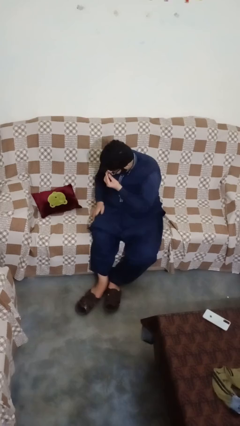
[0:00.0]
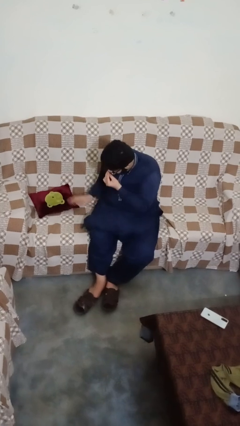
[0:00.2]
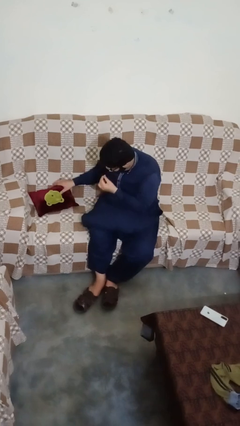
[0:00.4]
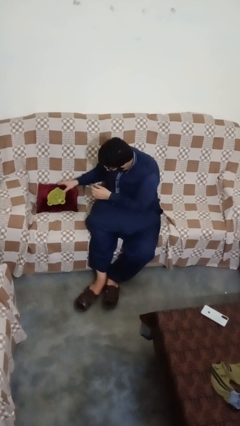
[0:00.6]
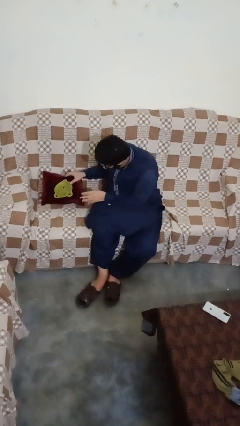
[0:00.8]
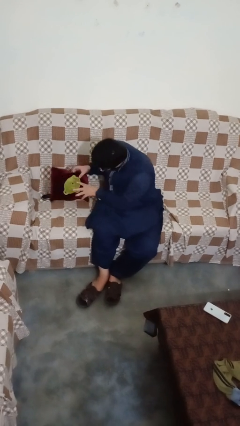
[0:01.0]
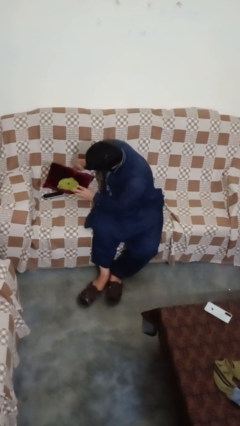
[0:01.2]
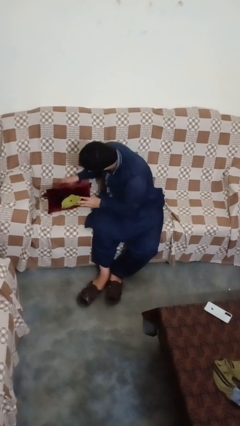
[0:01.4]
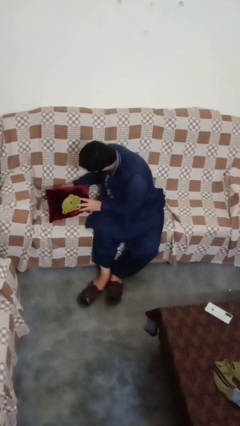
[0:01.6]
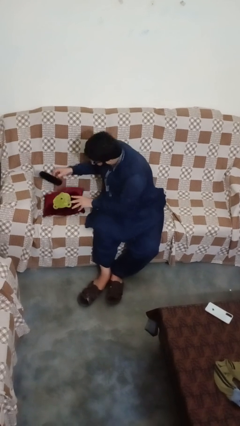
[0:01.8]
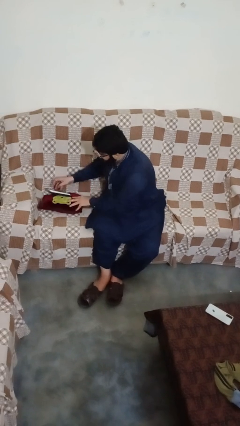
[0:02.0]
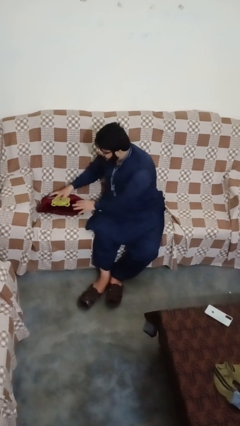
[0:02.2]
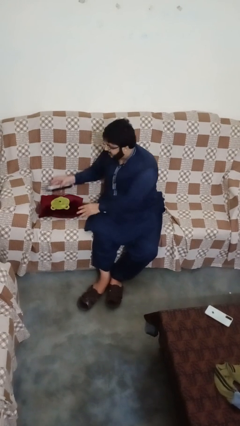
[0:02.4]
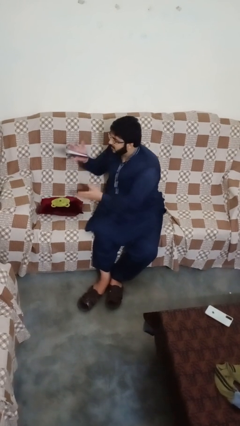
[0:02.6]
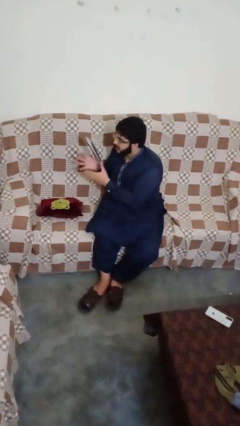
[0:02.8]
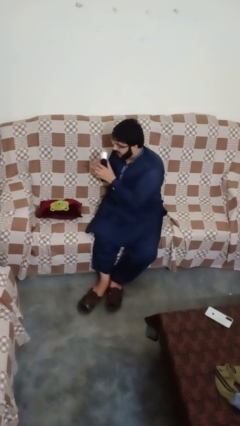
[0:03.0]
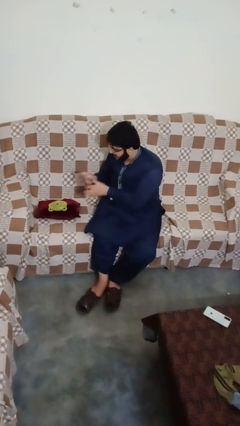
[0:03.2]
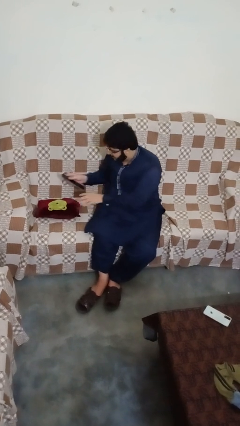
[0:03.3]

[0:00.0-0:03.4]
person searches in couch

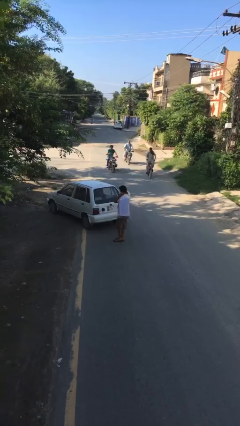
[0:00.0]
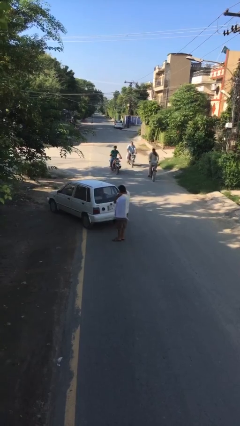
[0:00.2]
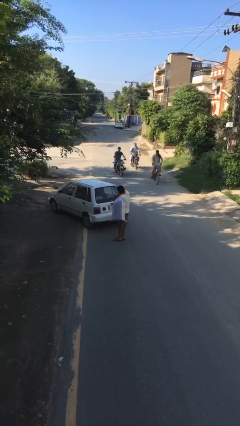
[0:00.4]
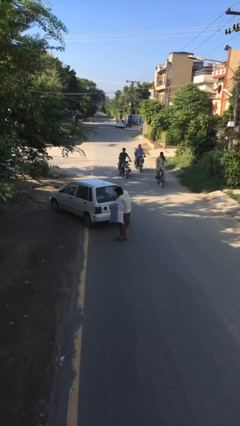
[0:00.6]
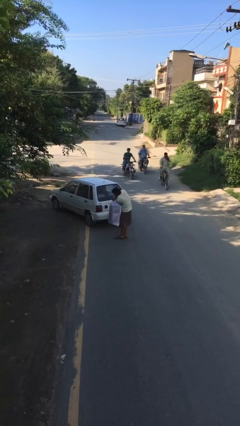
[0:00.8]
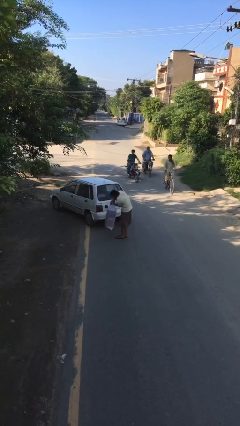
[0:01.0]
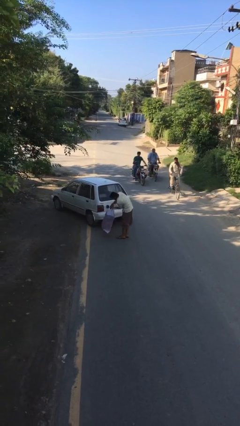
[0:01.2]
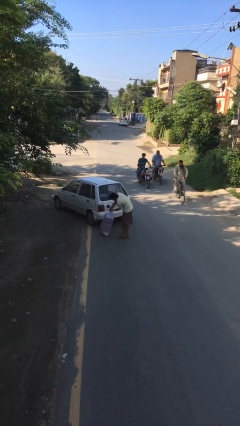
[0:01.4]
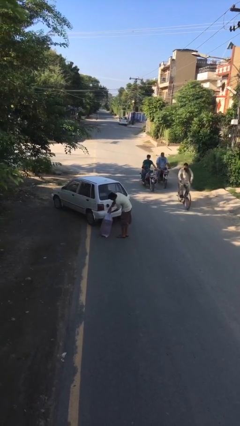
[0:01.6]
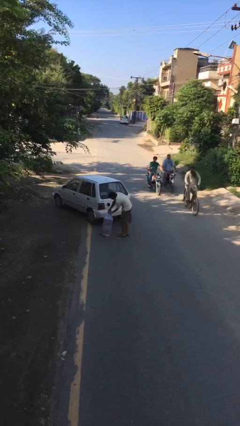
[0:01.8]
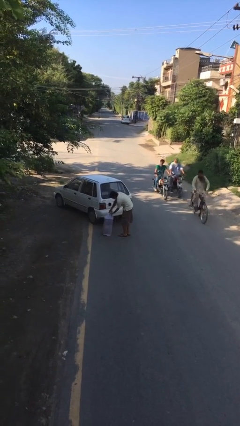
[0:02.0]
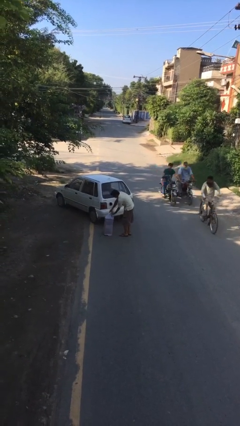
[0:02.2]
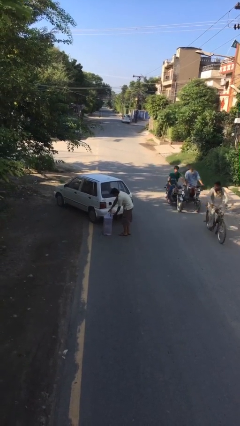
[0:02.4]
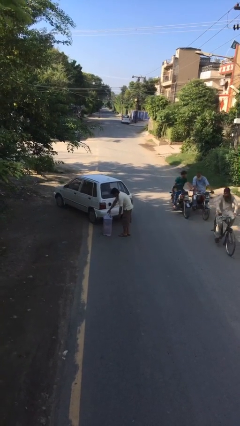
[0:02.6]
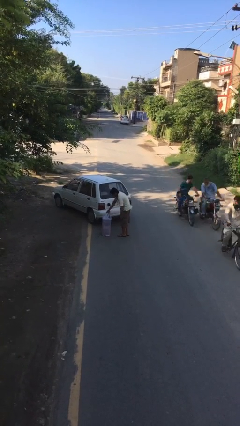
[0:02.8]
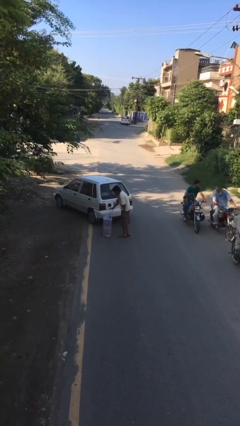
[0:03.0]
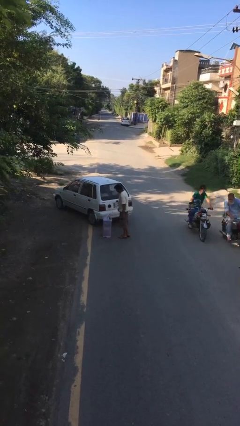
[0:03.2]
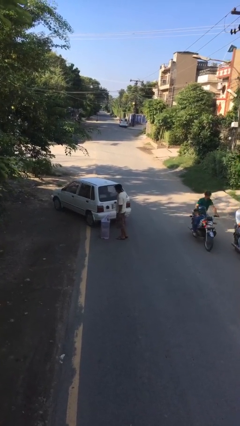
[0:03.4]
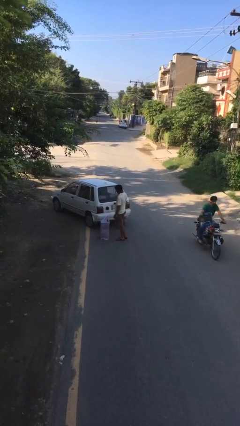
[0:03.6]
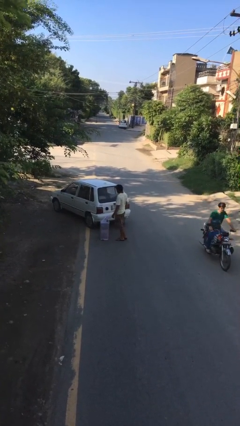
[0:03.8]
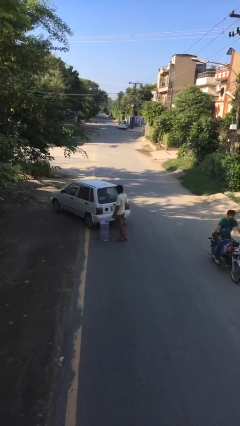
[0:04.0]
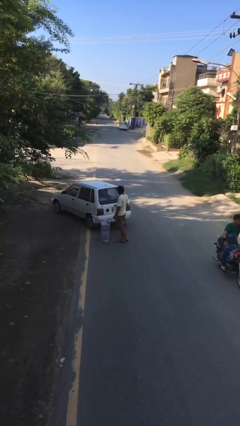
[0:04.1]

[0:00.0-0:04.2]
person puts down object on floor

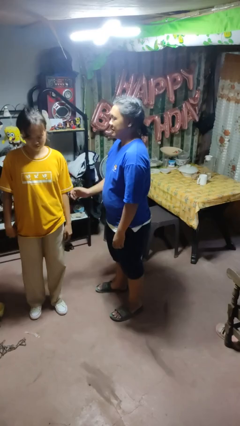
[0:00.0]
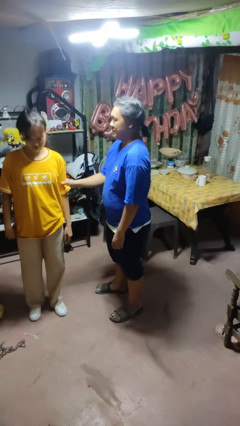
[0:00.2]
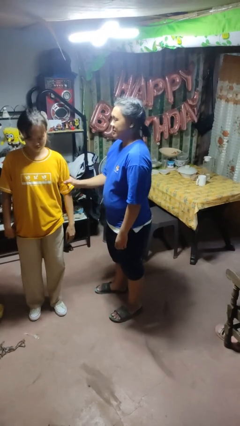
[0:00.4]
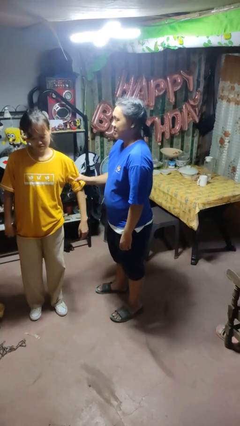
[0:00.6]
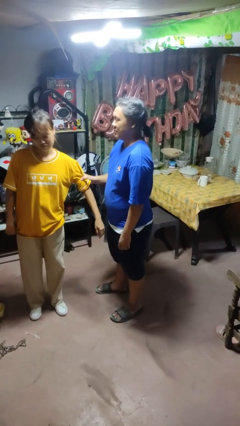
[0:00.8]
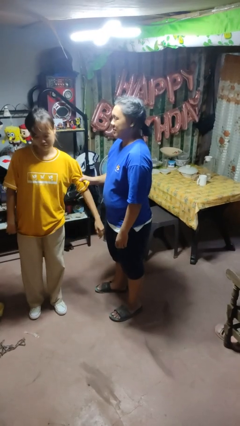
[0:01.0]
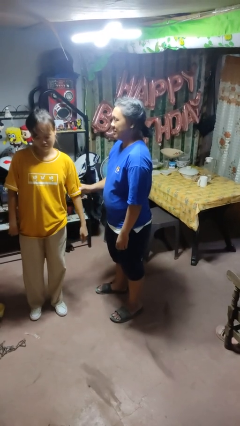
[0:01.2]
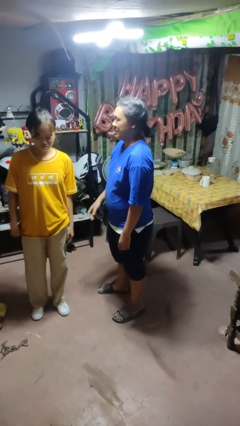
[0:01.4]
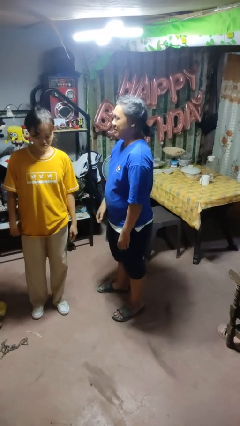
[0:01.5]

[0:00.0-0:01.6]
person grabs person by bicep

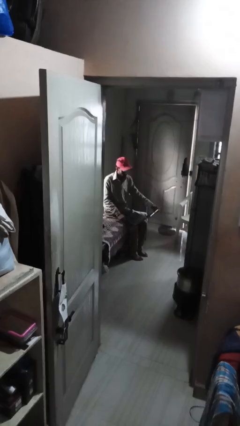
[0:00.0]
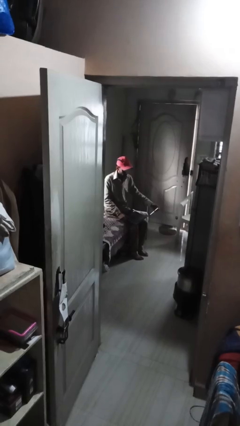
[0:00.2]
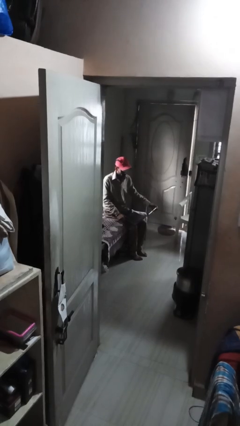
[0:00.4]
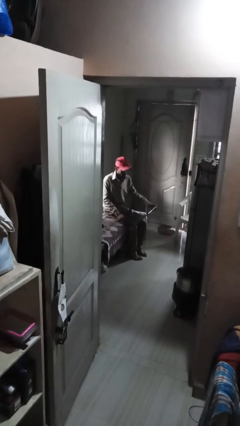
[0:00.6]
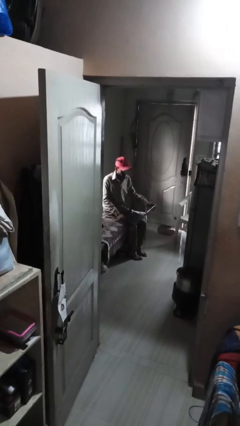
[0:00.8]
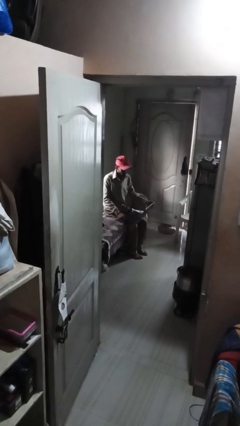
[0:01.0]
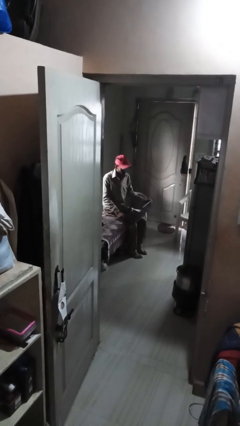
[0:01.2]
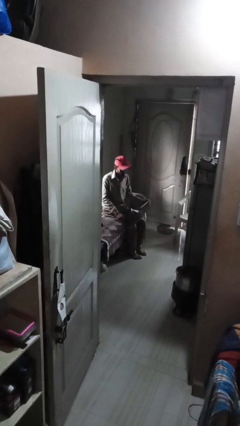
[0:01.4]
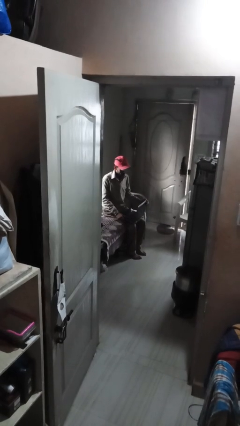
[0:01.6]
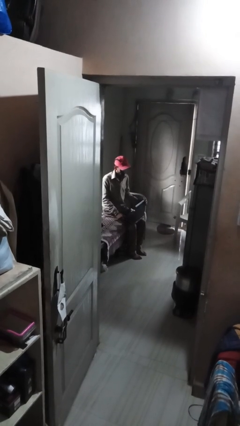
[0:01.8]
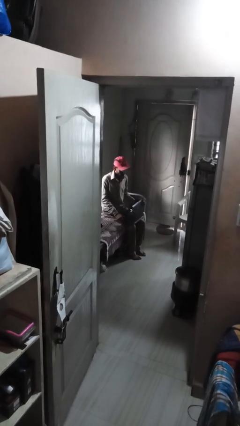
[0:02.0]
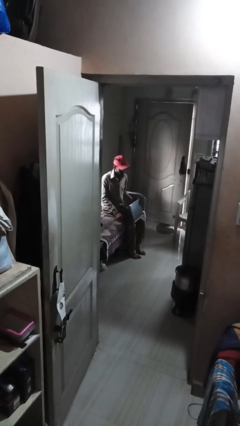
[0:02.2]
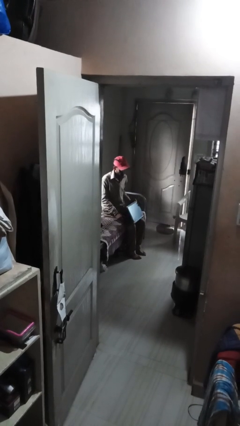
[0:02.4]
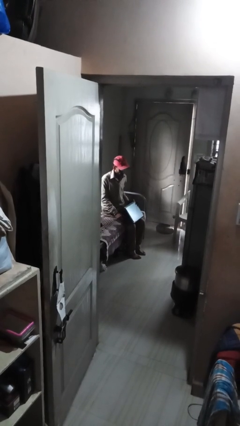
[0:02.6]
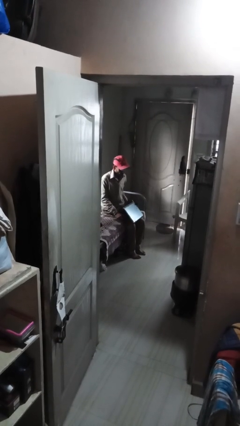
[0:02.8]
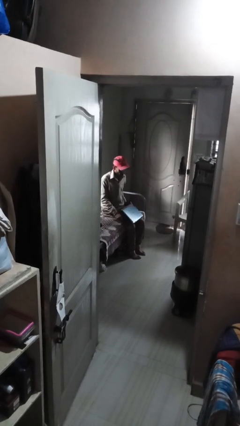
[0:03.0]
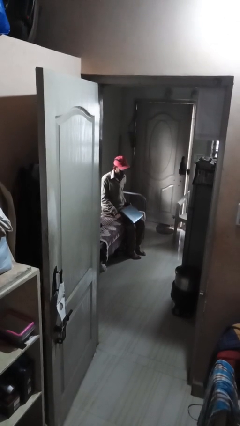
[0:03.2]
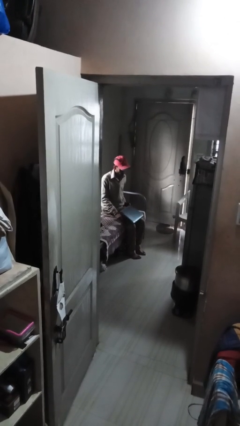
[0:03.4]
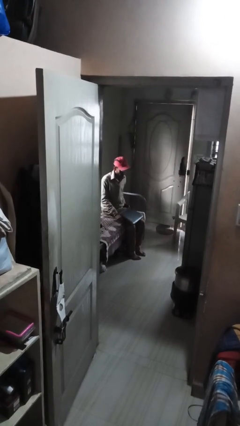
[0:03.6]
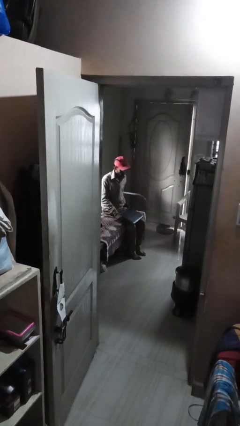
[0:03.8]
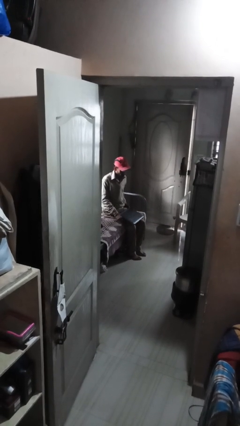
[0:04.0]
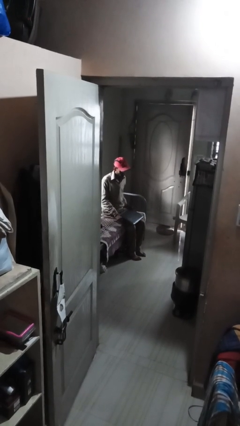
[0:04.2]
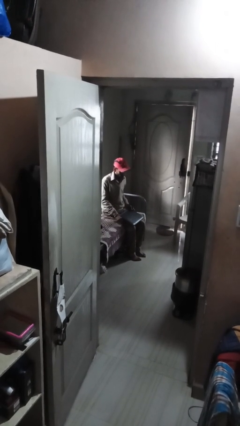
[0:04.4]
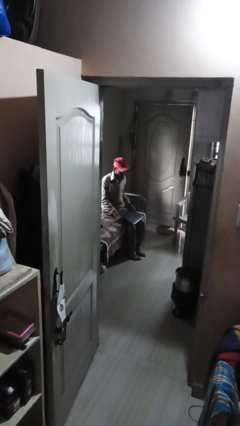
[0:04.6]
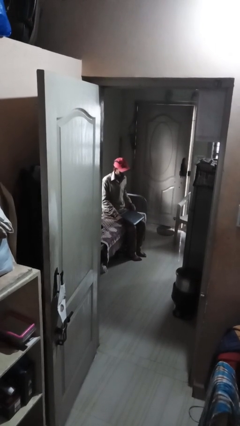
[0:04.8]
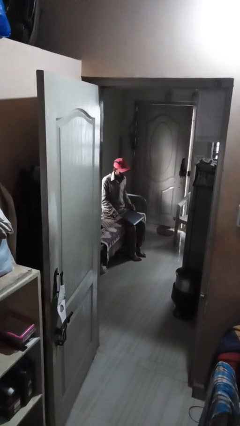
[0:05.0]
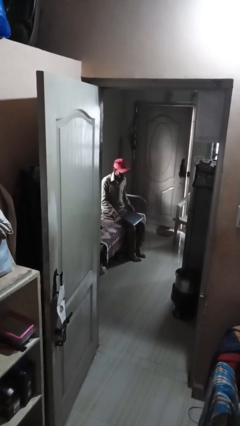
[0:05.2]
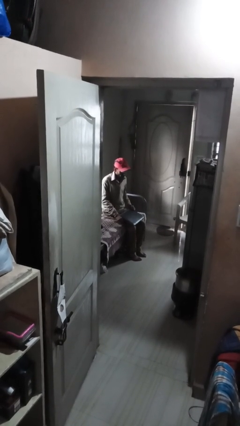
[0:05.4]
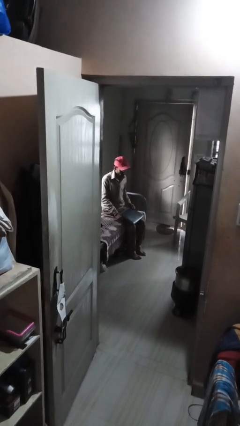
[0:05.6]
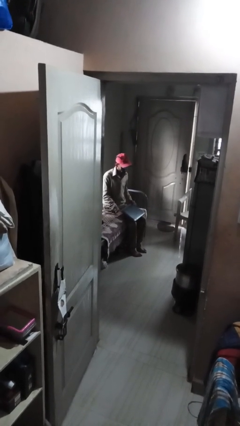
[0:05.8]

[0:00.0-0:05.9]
person closes laptop

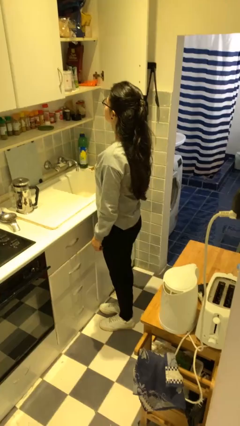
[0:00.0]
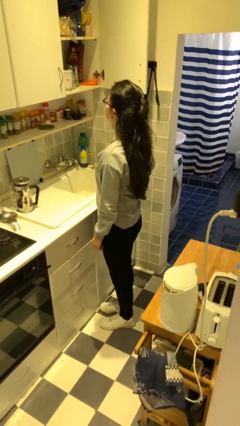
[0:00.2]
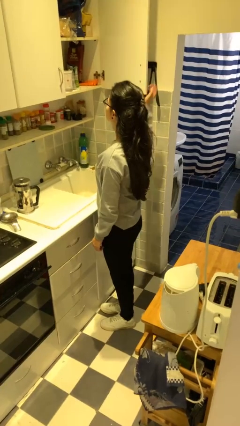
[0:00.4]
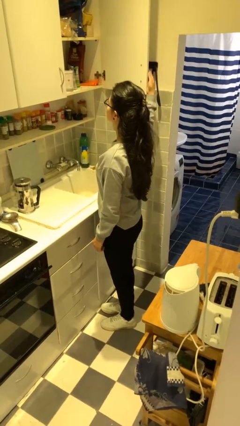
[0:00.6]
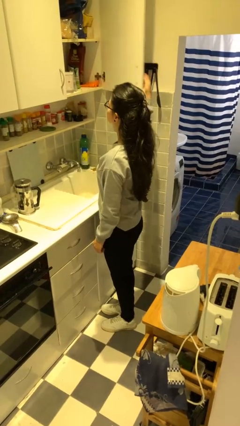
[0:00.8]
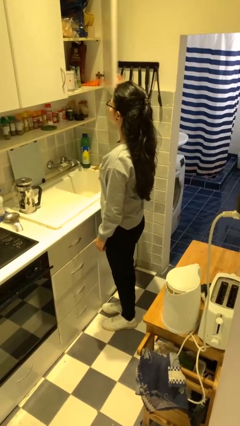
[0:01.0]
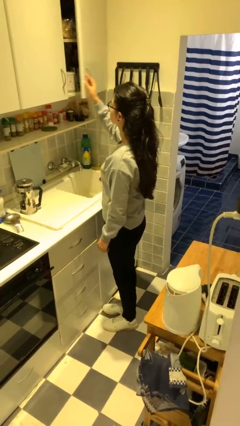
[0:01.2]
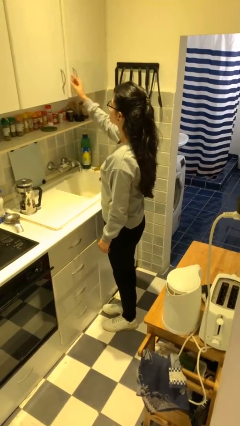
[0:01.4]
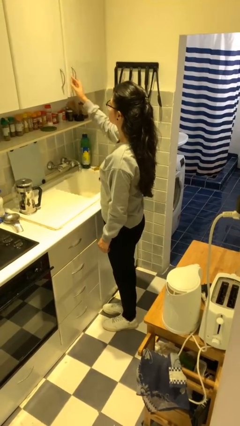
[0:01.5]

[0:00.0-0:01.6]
person closes cabinet

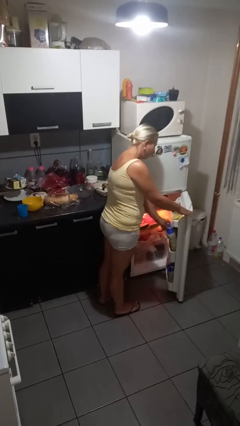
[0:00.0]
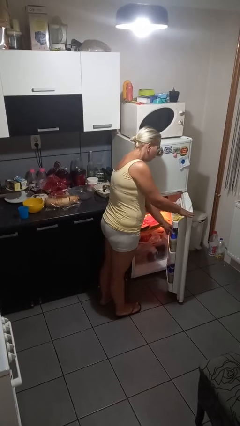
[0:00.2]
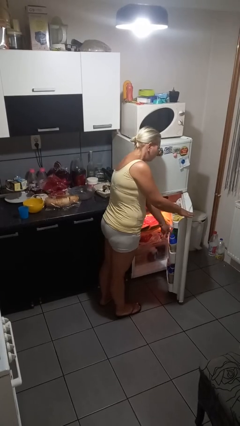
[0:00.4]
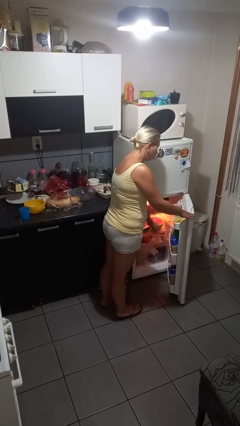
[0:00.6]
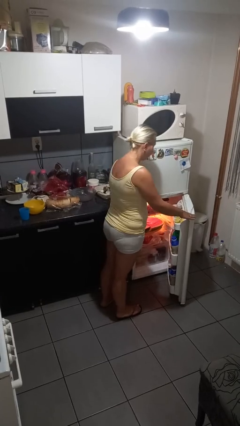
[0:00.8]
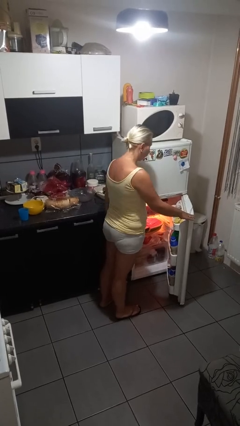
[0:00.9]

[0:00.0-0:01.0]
person puts object into refrigerator
